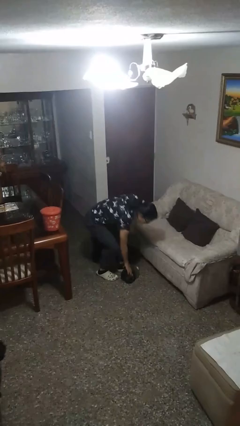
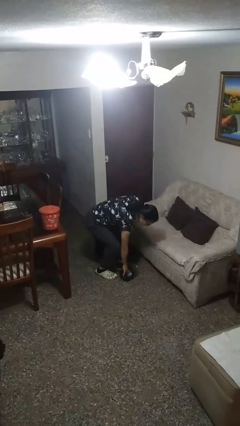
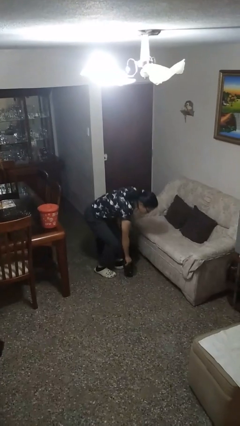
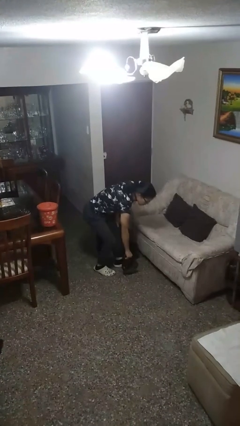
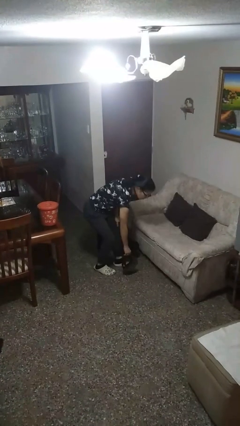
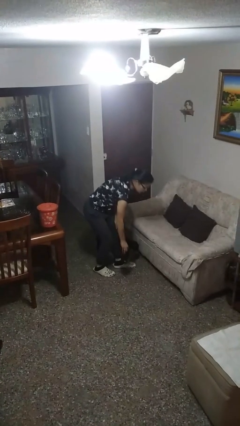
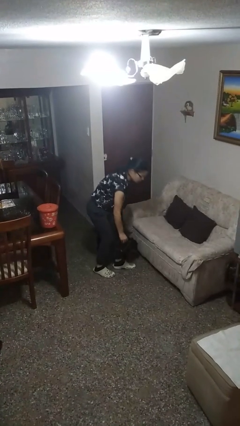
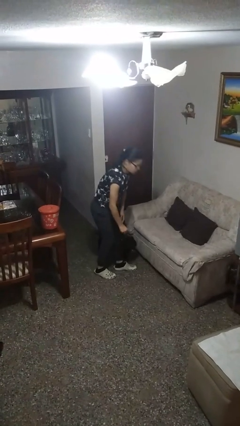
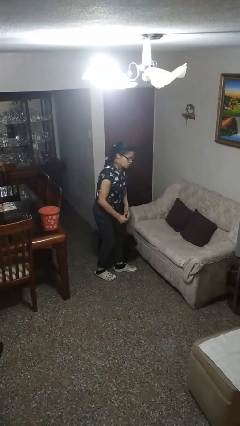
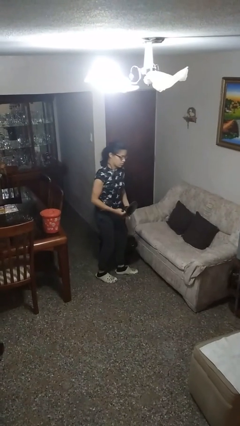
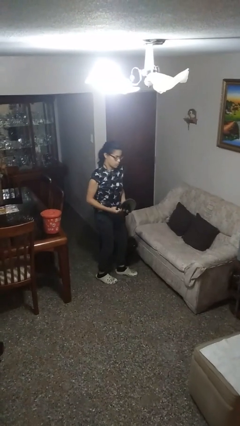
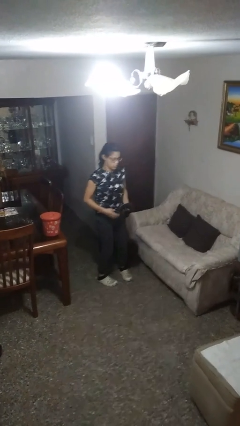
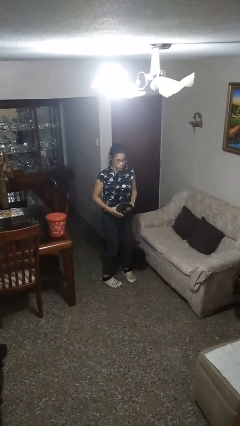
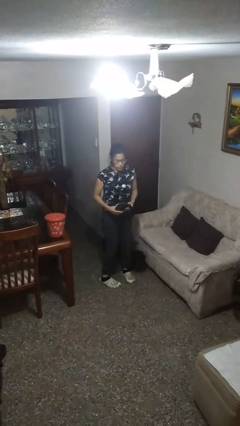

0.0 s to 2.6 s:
person picks up object from floor

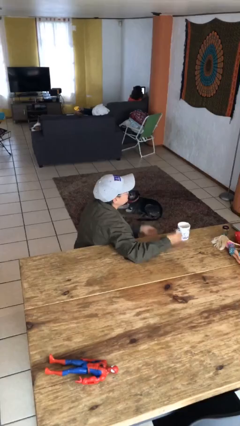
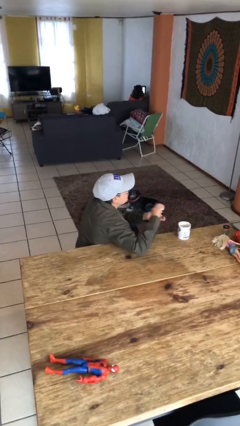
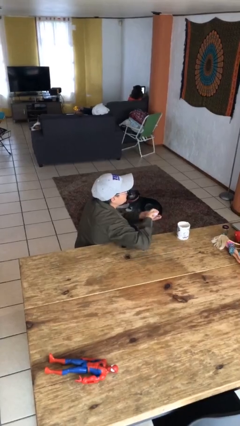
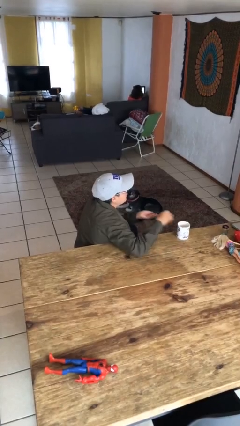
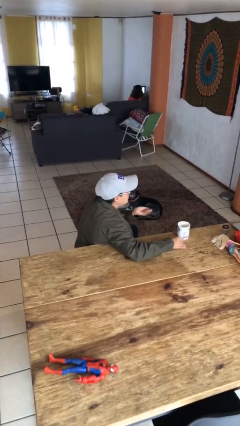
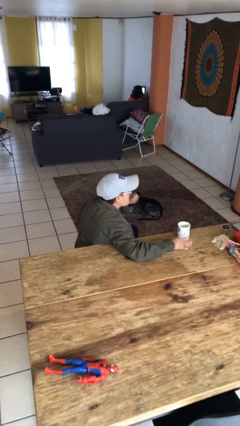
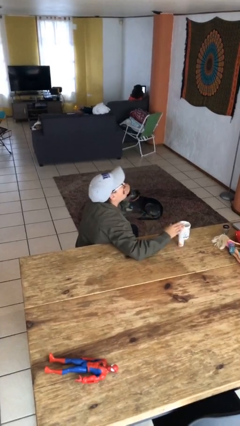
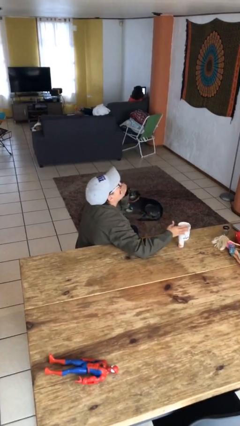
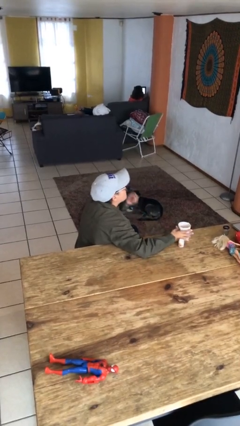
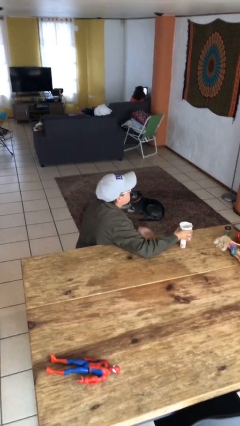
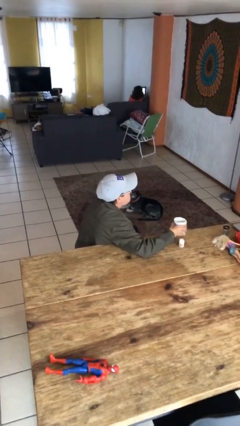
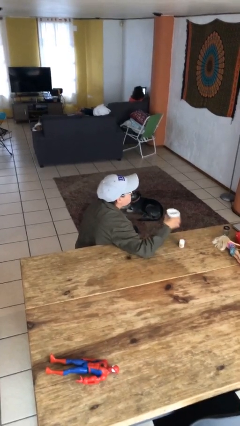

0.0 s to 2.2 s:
person takes medicine pills

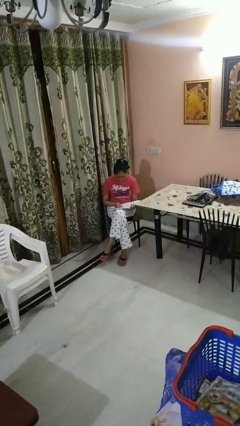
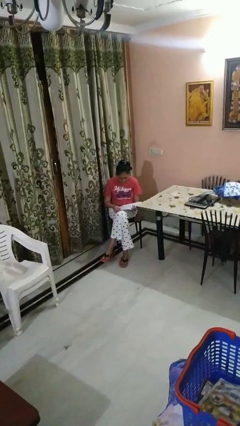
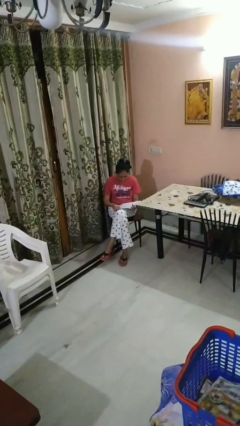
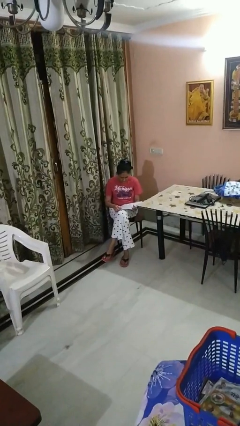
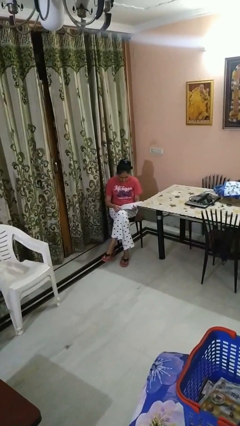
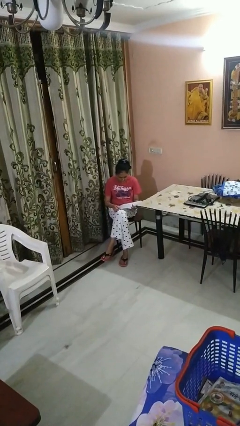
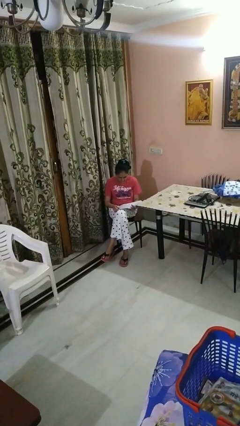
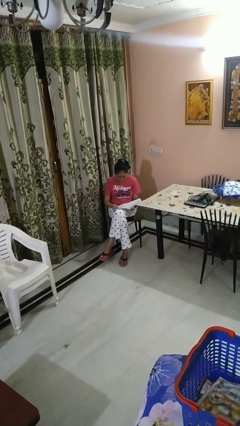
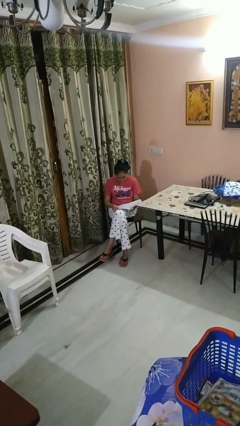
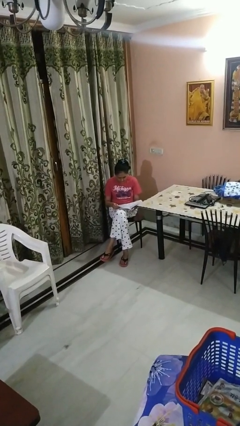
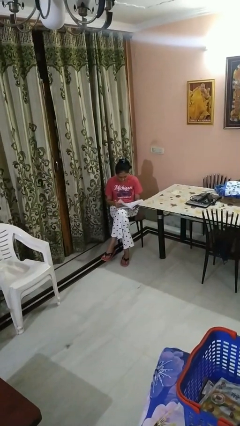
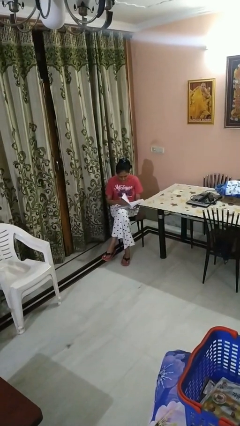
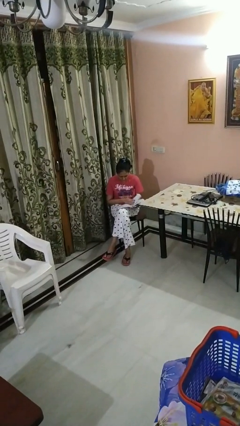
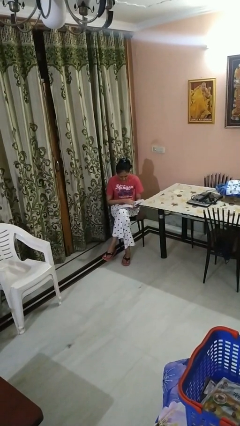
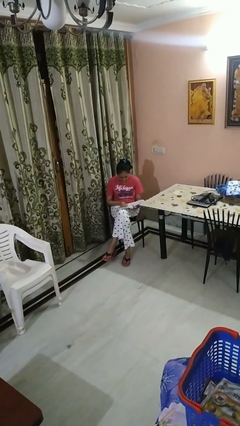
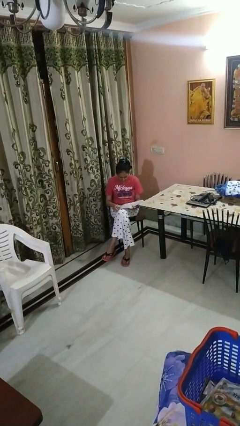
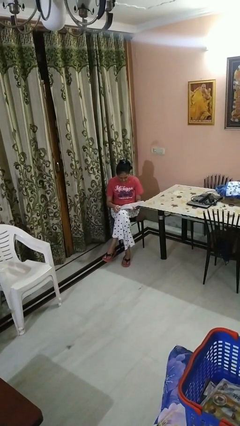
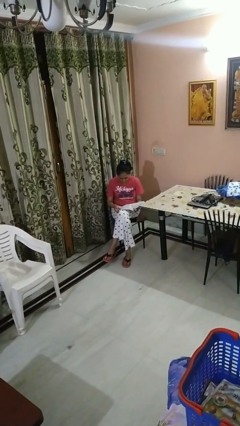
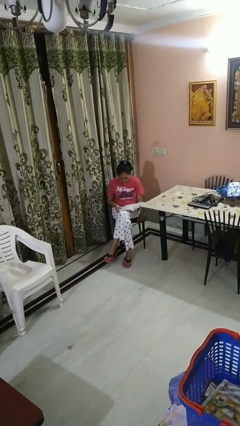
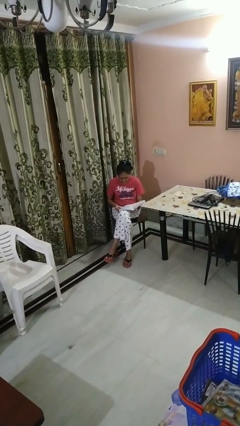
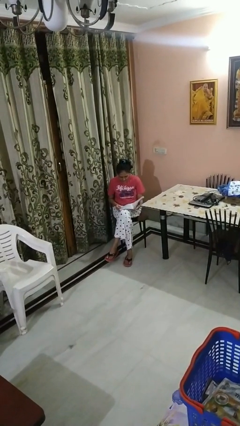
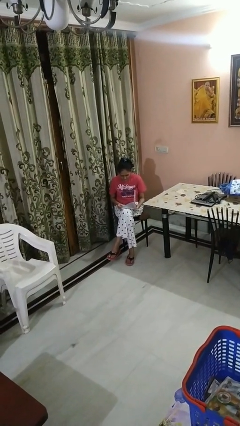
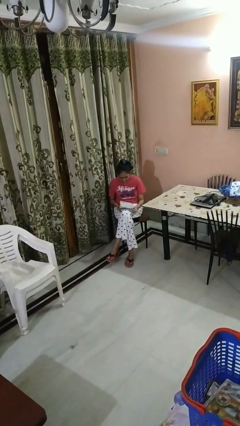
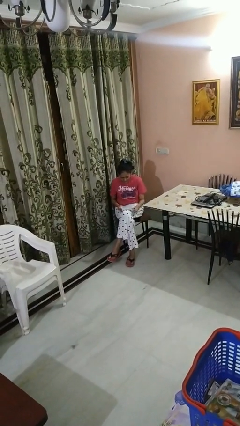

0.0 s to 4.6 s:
person reads magazine

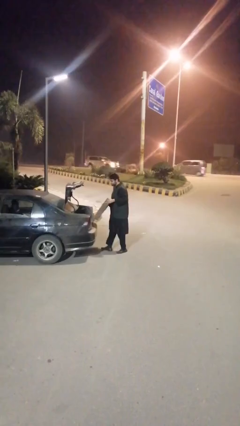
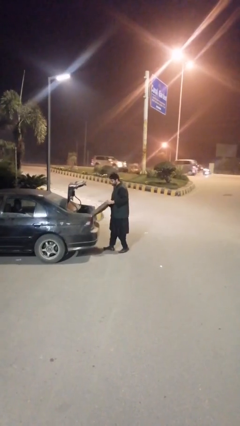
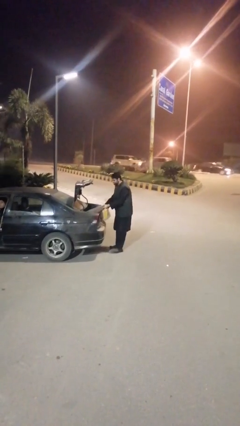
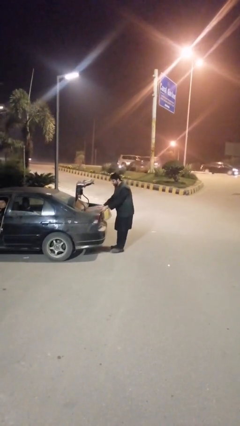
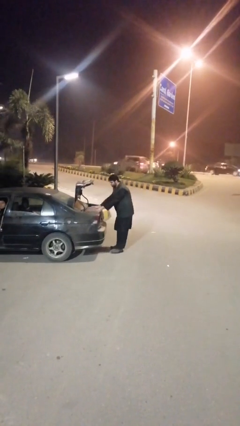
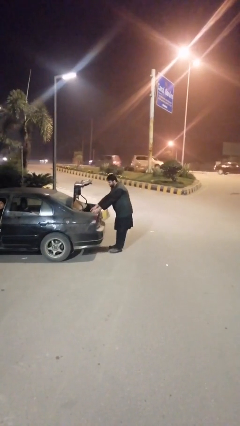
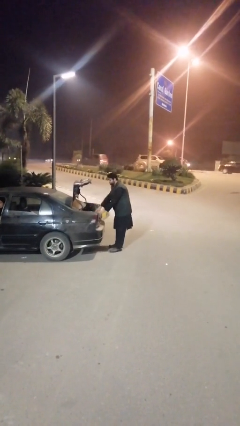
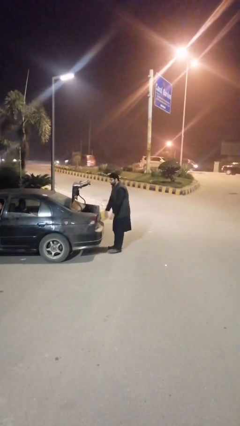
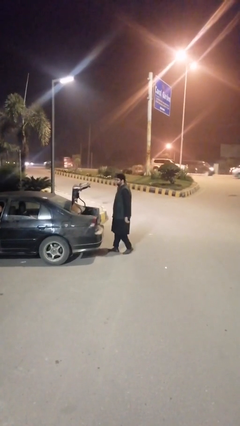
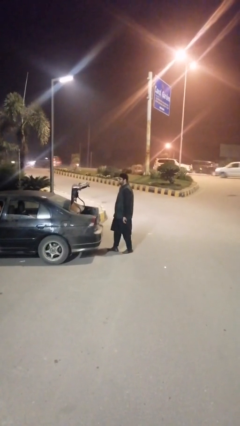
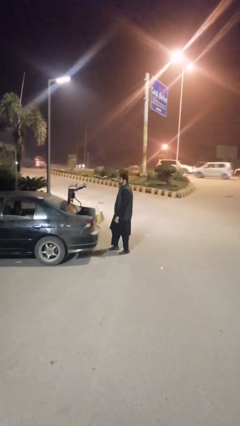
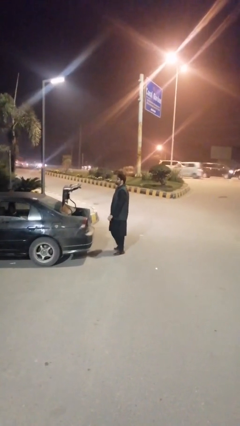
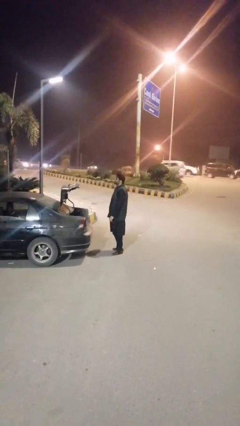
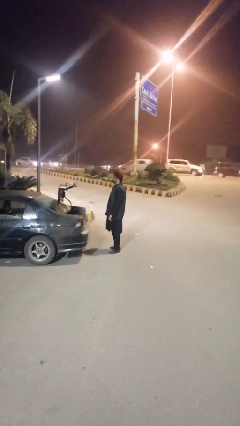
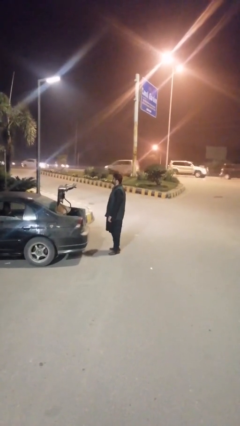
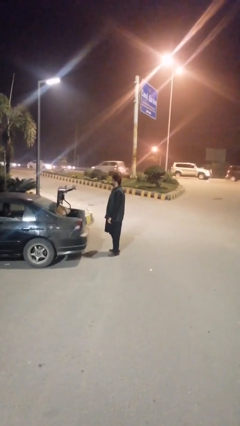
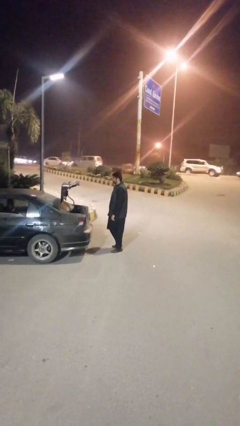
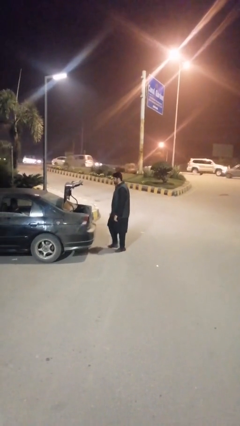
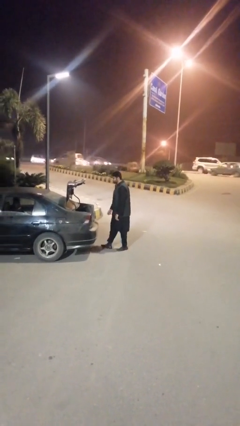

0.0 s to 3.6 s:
person loads car

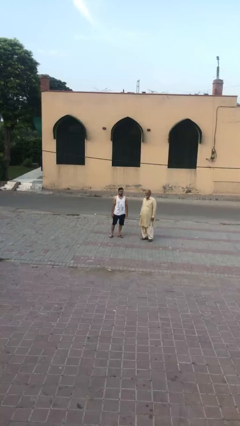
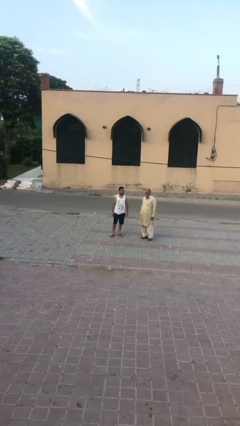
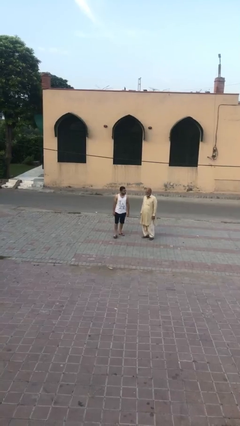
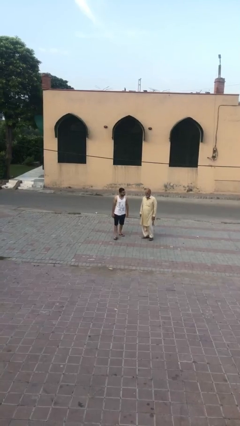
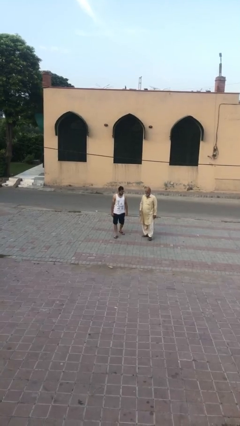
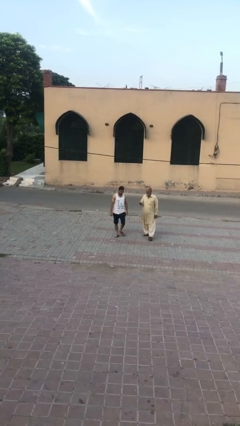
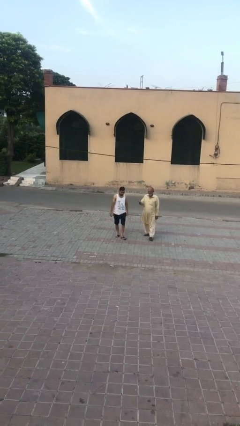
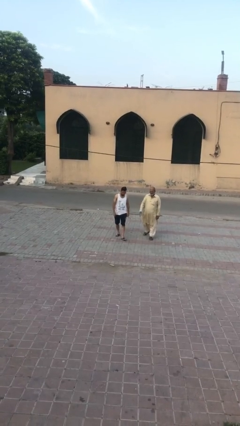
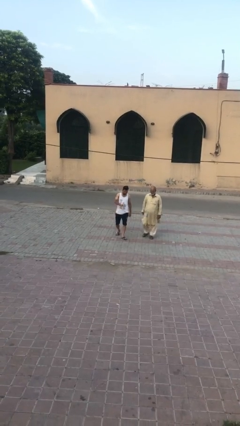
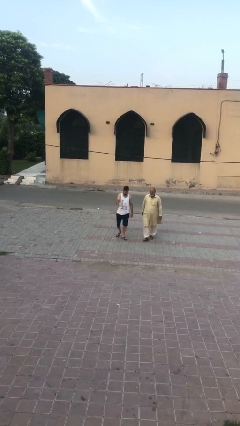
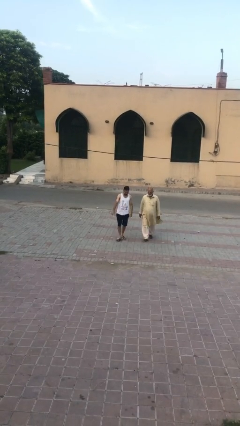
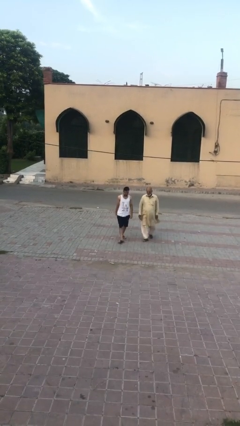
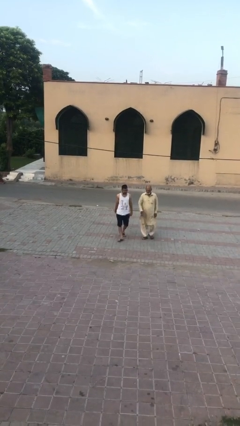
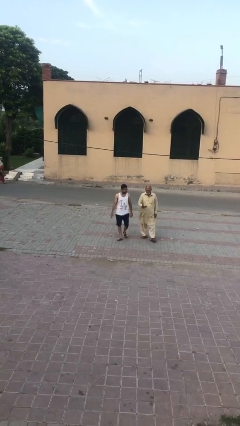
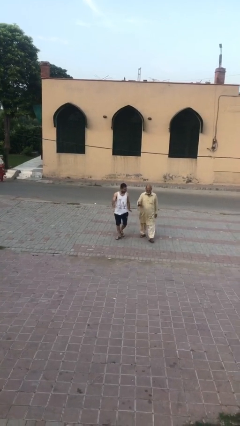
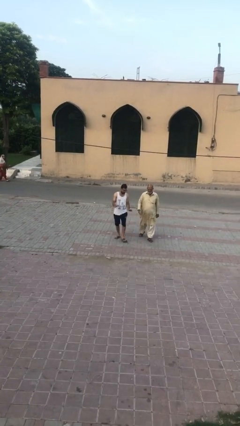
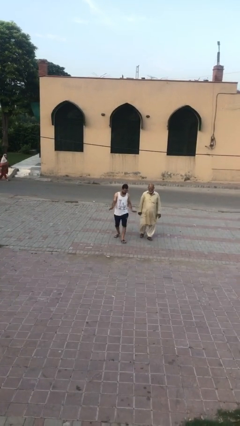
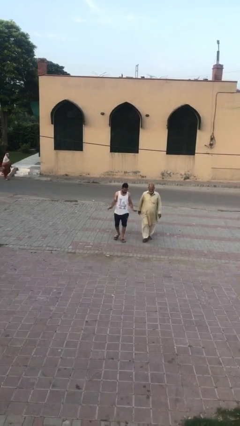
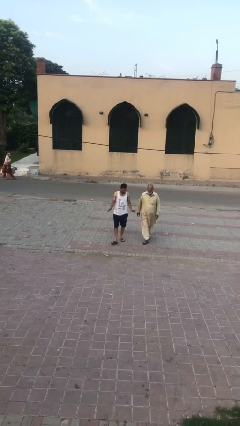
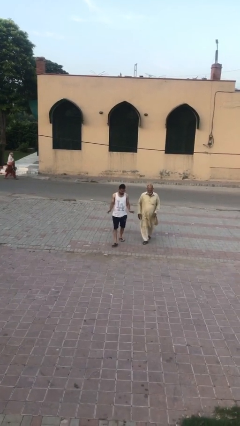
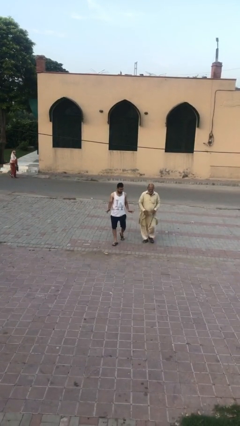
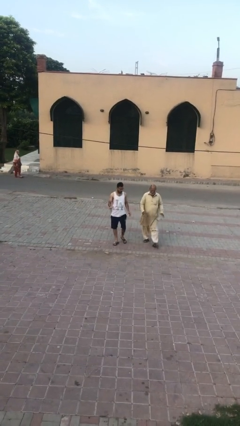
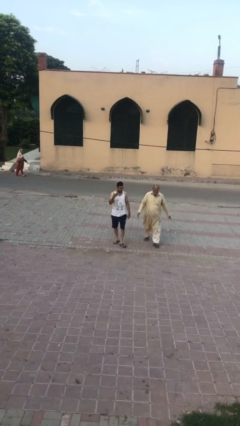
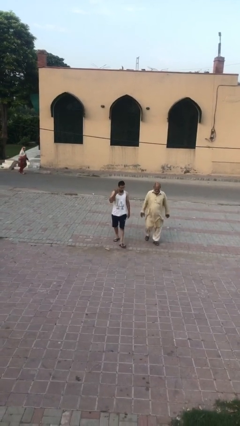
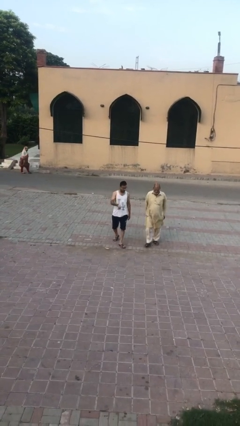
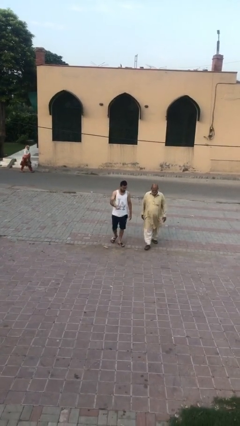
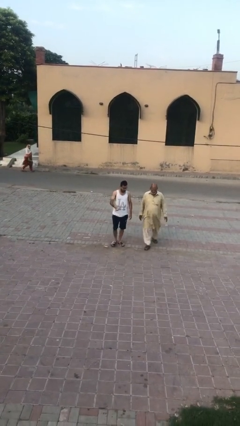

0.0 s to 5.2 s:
person talks to person
